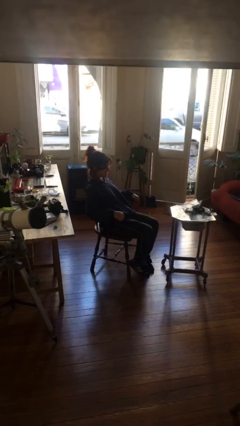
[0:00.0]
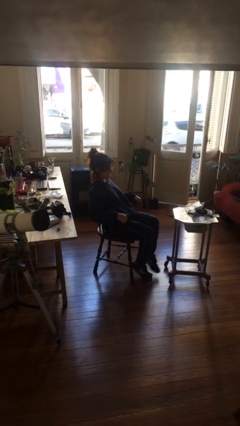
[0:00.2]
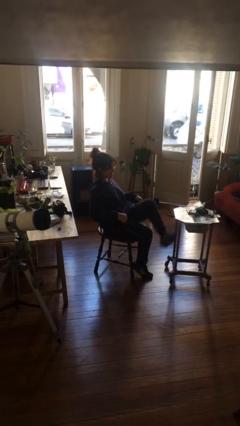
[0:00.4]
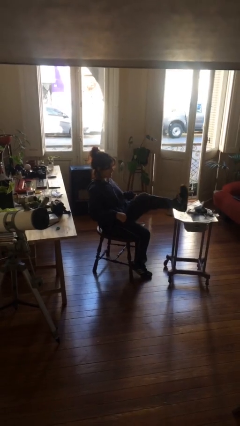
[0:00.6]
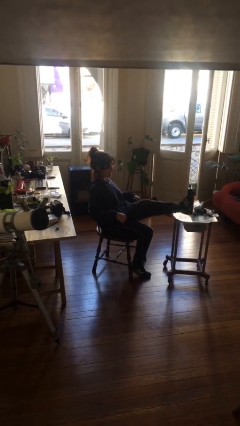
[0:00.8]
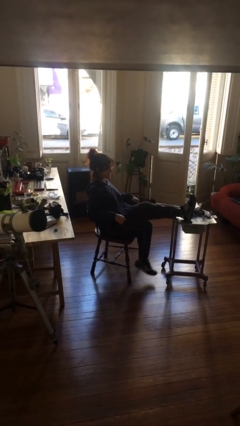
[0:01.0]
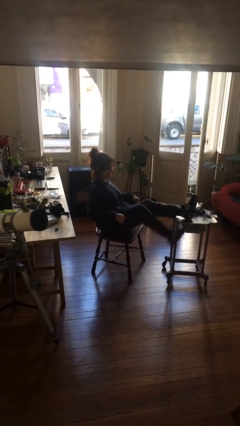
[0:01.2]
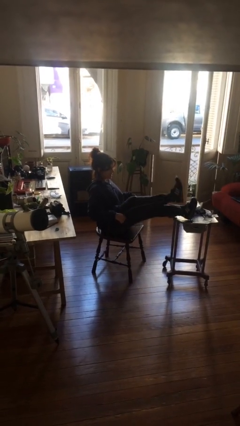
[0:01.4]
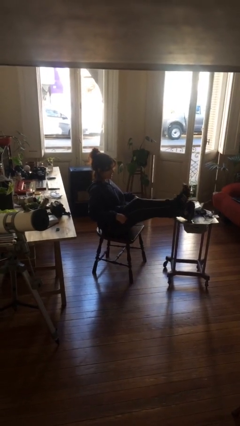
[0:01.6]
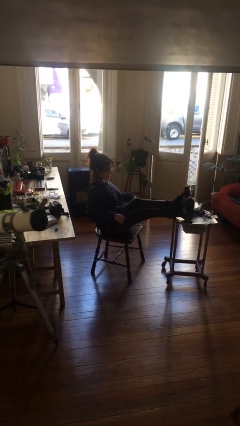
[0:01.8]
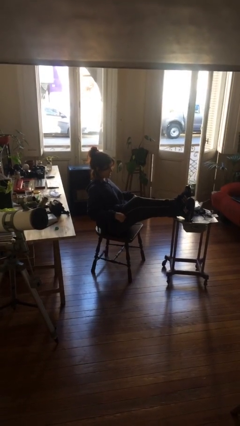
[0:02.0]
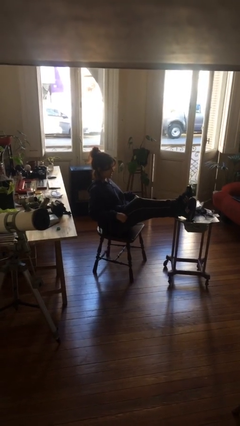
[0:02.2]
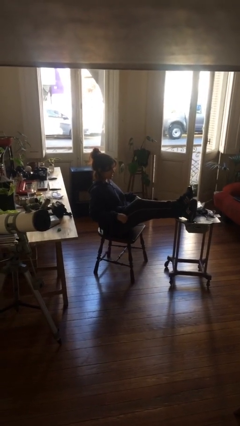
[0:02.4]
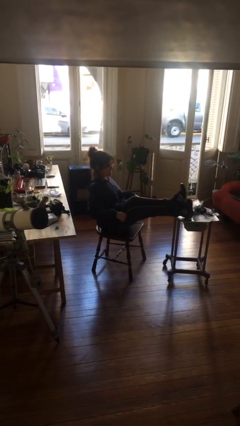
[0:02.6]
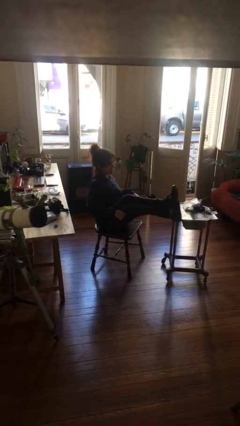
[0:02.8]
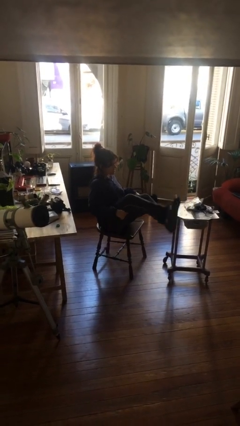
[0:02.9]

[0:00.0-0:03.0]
person puts feet up

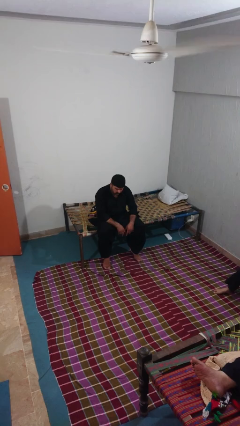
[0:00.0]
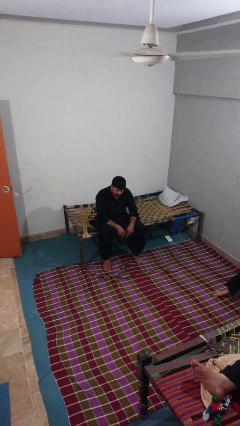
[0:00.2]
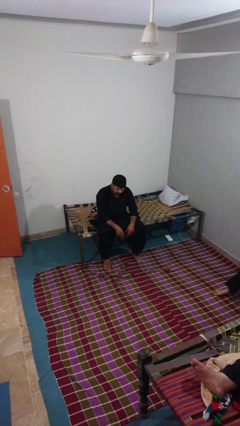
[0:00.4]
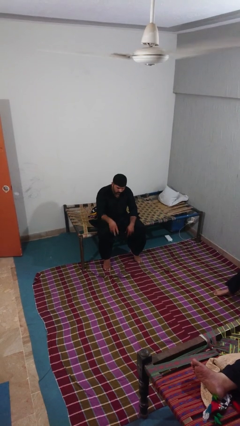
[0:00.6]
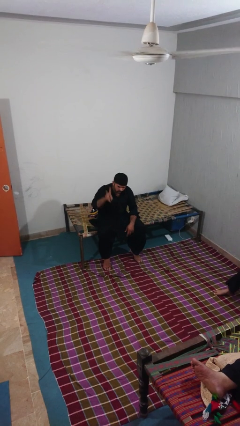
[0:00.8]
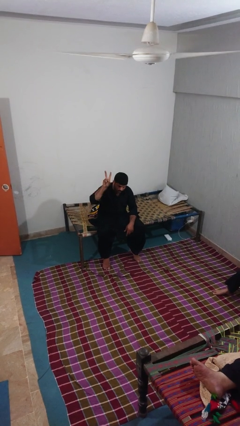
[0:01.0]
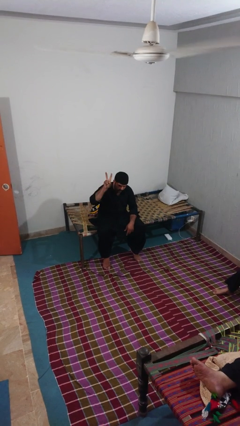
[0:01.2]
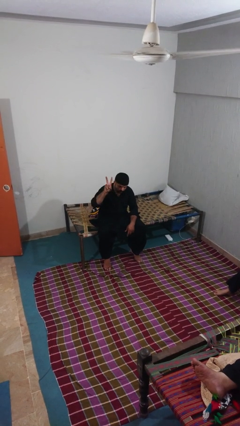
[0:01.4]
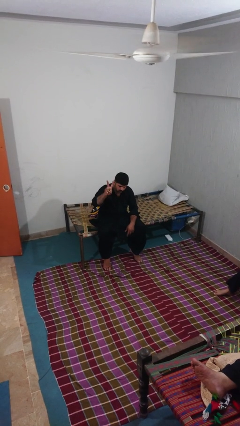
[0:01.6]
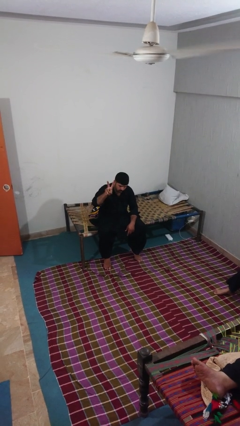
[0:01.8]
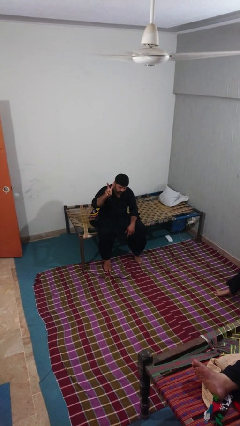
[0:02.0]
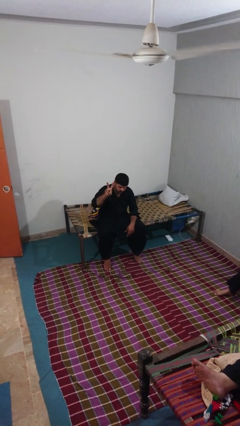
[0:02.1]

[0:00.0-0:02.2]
person gestures peace

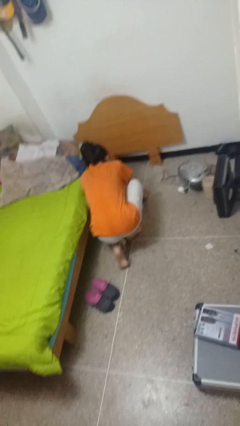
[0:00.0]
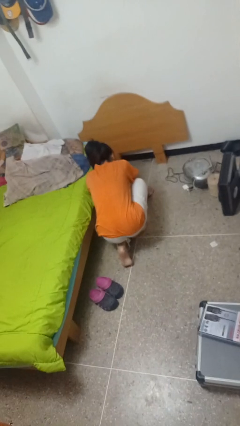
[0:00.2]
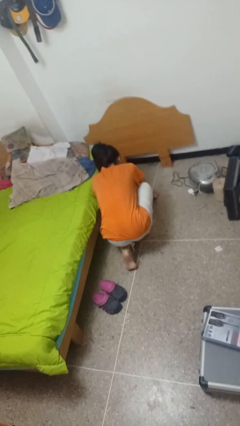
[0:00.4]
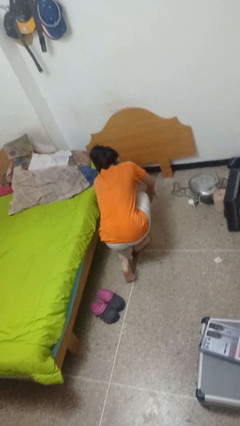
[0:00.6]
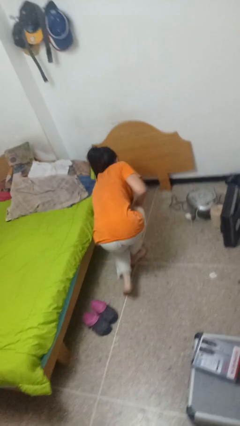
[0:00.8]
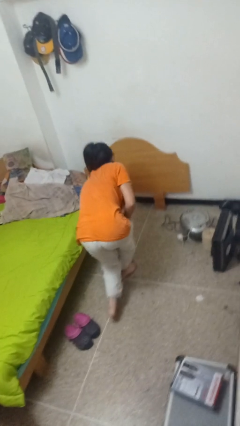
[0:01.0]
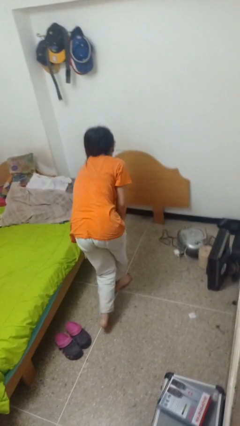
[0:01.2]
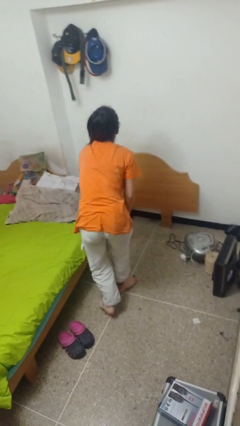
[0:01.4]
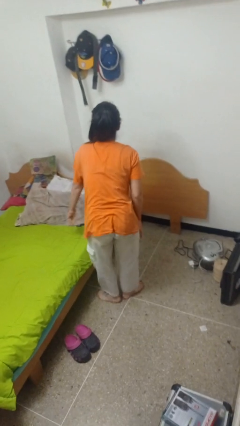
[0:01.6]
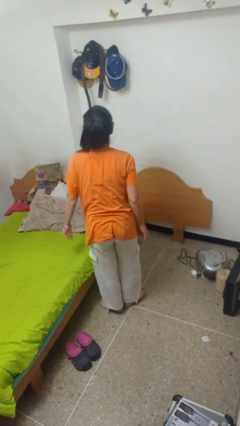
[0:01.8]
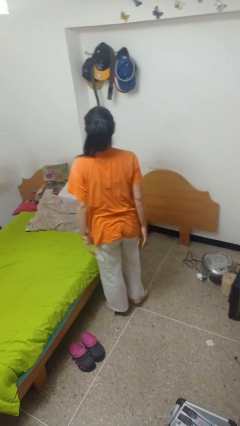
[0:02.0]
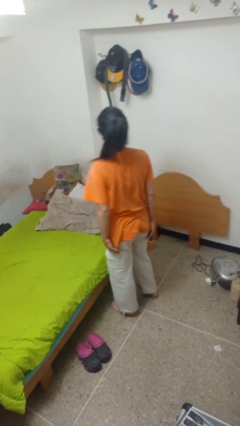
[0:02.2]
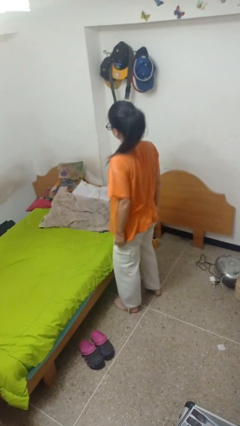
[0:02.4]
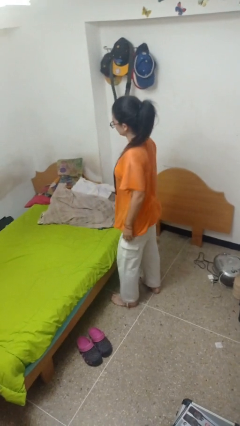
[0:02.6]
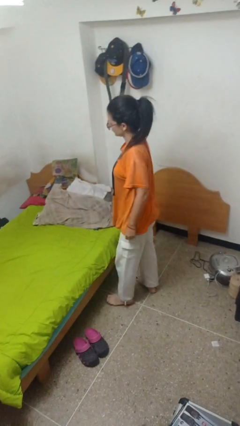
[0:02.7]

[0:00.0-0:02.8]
person stands up from floor

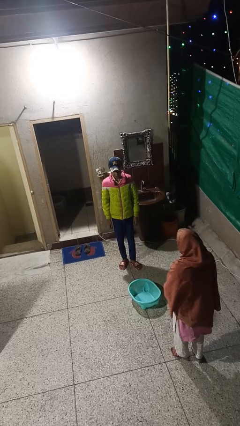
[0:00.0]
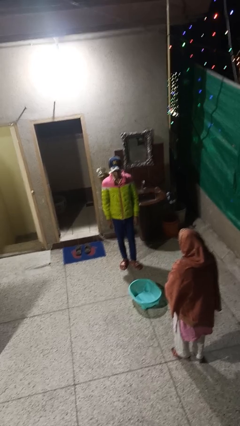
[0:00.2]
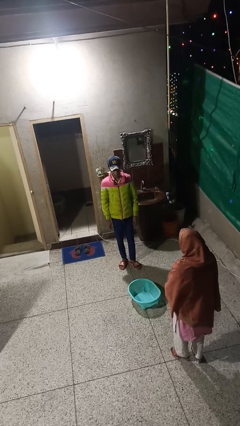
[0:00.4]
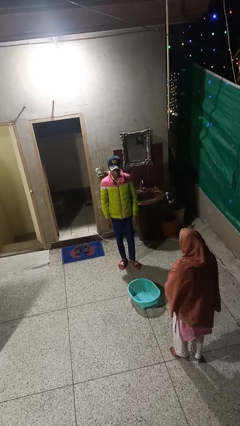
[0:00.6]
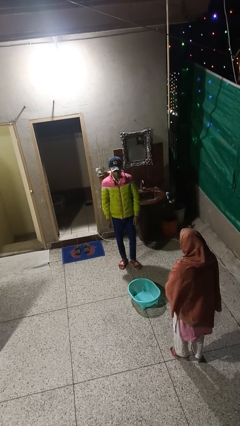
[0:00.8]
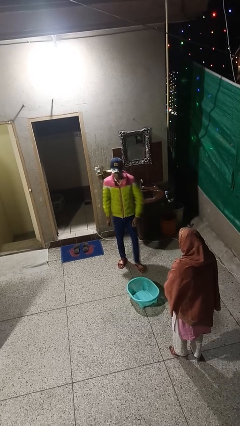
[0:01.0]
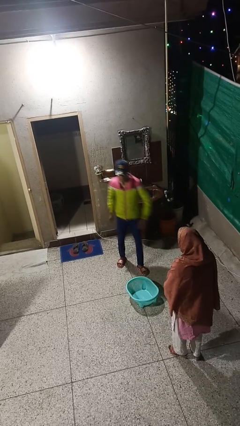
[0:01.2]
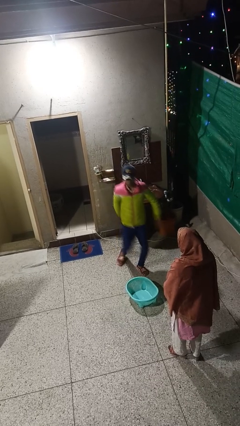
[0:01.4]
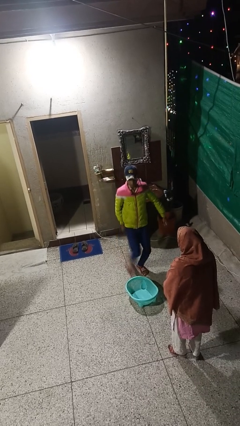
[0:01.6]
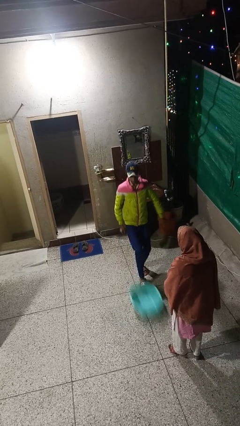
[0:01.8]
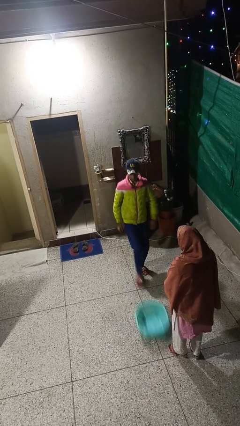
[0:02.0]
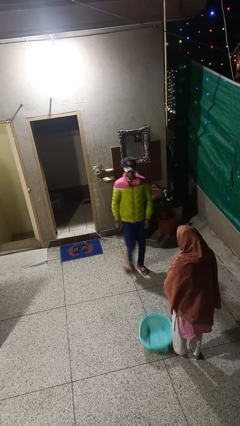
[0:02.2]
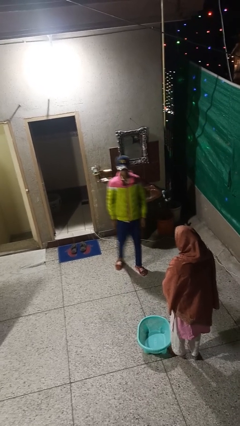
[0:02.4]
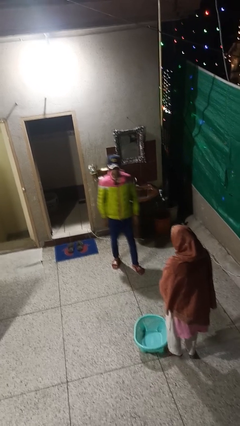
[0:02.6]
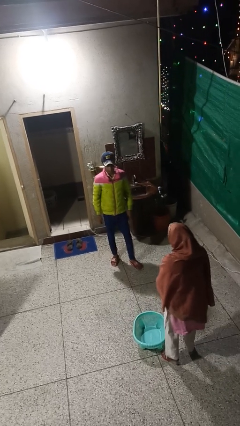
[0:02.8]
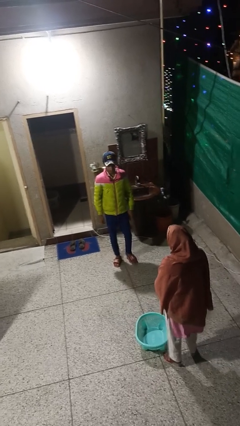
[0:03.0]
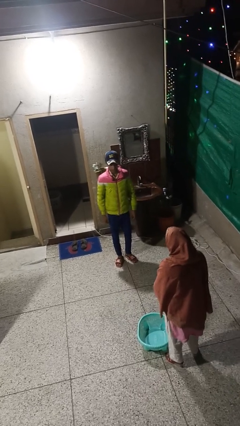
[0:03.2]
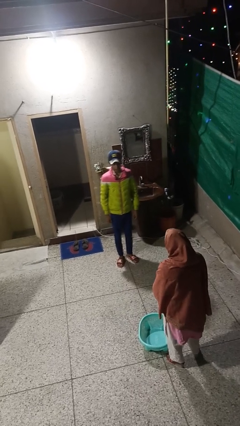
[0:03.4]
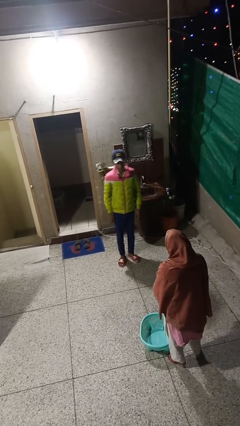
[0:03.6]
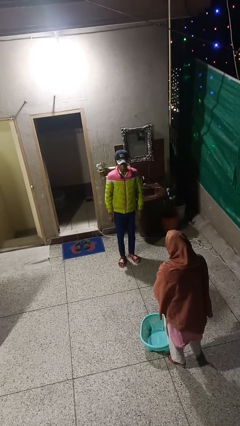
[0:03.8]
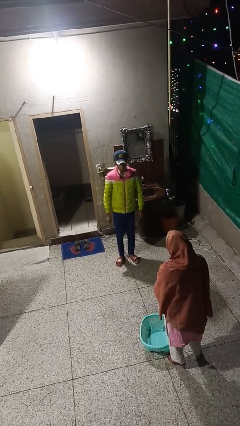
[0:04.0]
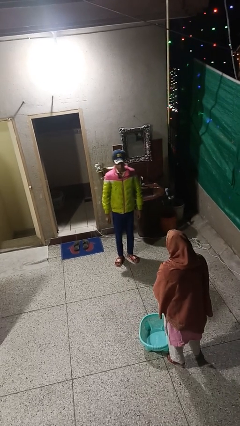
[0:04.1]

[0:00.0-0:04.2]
person kicks object to person

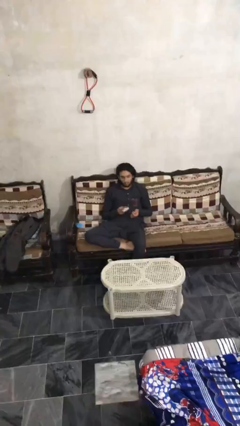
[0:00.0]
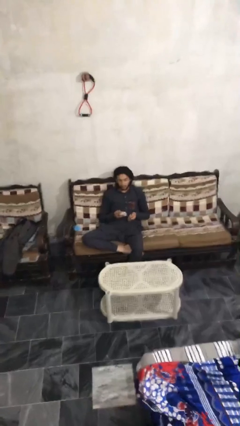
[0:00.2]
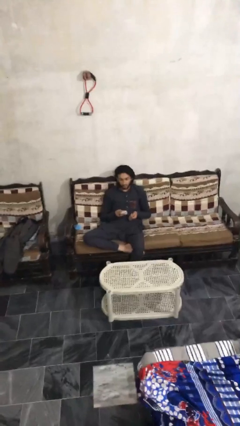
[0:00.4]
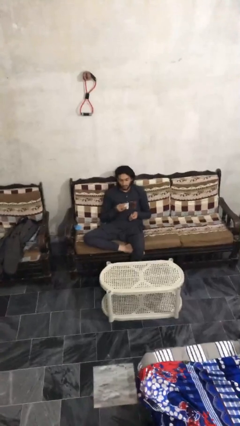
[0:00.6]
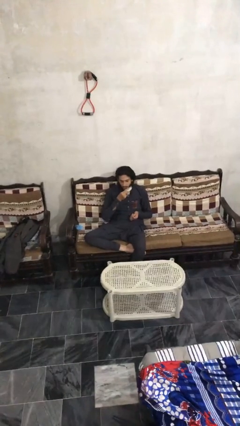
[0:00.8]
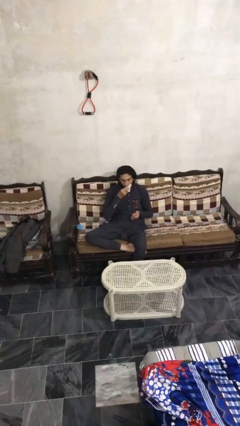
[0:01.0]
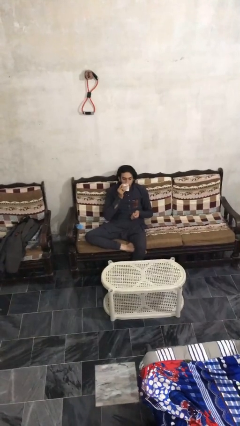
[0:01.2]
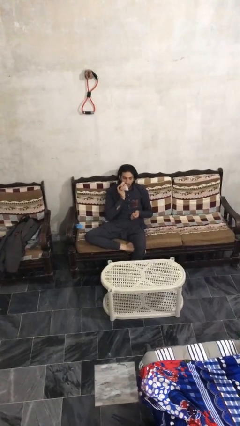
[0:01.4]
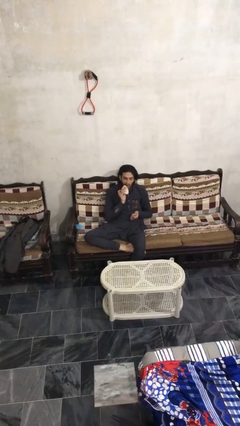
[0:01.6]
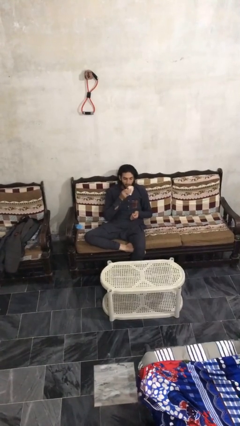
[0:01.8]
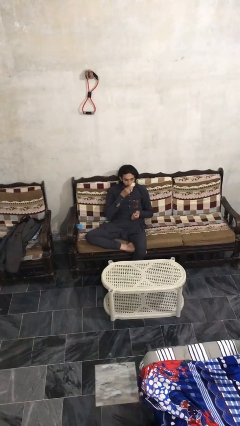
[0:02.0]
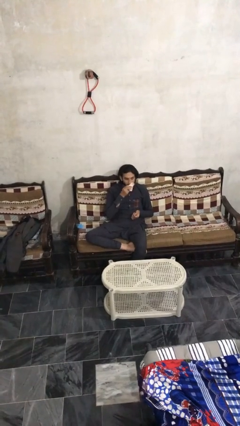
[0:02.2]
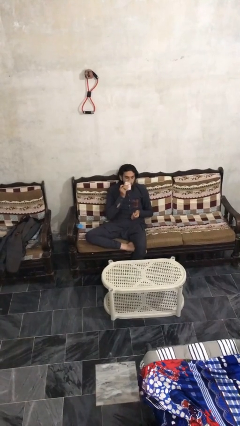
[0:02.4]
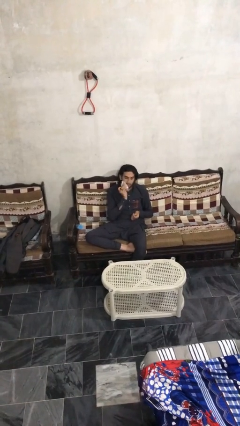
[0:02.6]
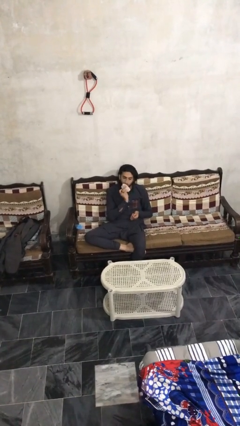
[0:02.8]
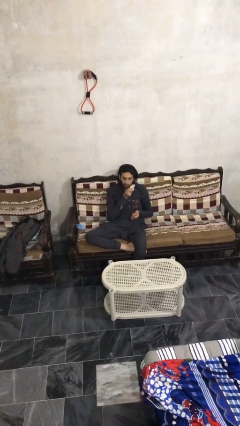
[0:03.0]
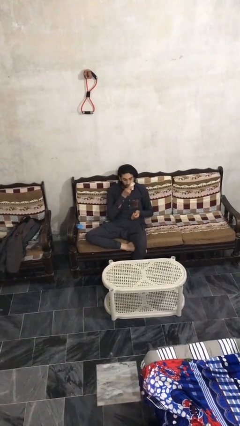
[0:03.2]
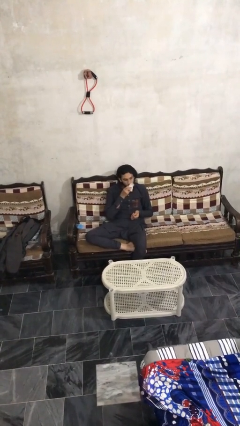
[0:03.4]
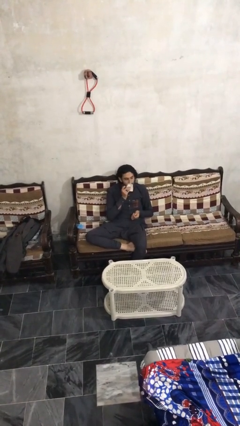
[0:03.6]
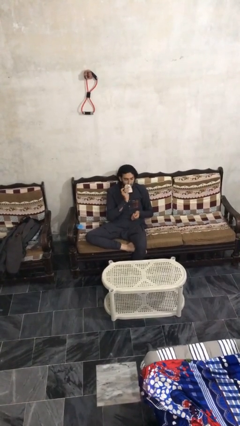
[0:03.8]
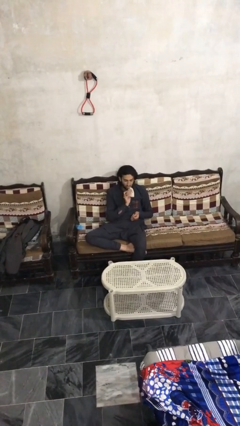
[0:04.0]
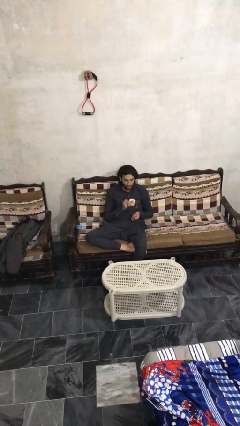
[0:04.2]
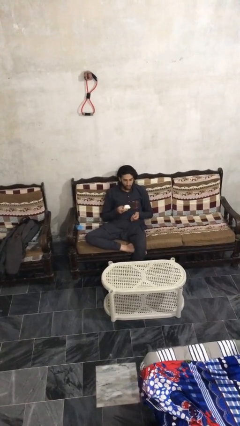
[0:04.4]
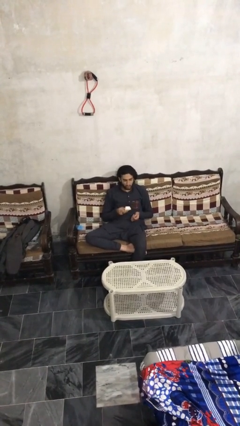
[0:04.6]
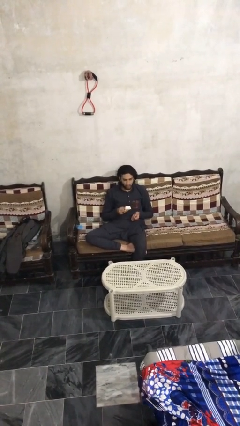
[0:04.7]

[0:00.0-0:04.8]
person wipes mouth with napkin

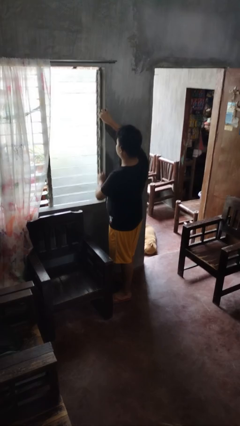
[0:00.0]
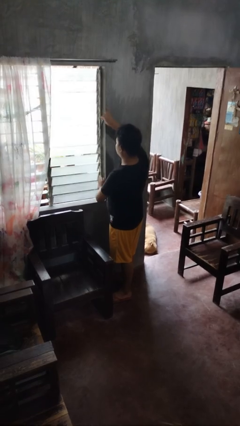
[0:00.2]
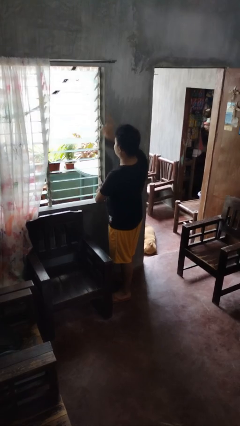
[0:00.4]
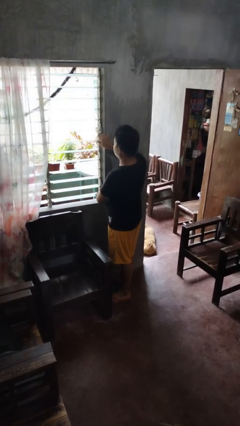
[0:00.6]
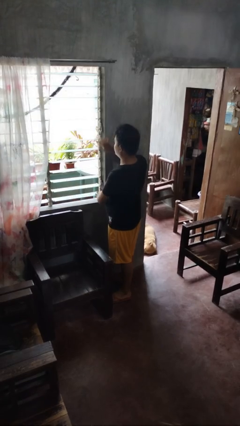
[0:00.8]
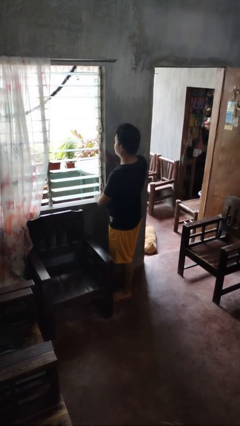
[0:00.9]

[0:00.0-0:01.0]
person opens home window
